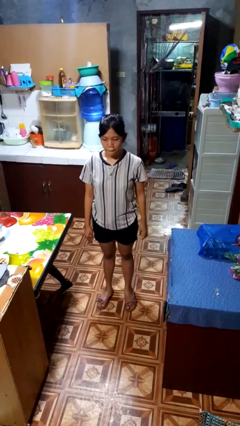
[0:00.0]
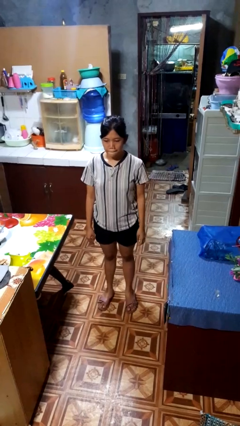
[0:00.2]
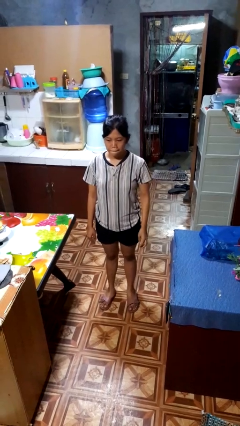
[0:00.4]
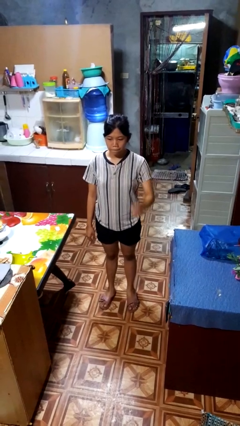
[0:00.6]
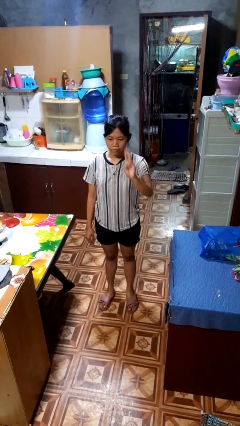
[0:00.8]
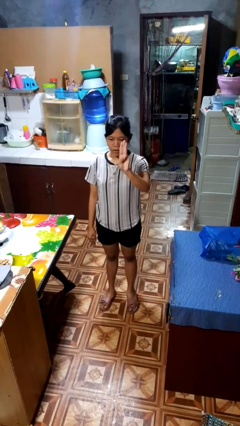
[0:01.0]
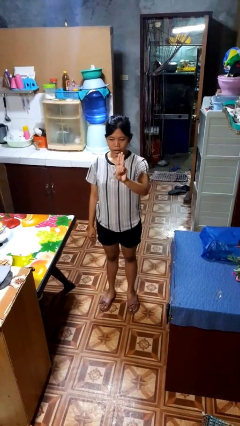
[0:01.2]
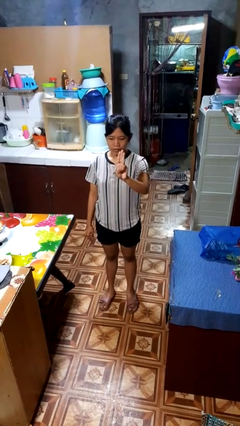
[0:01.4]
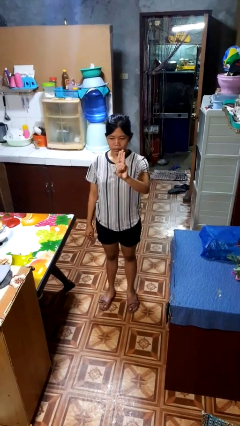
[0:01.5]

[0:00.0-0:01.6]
person gestures number three

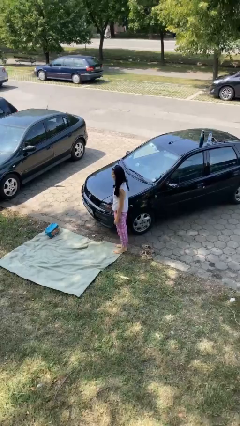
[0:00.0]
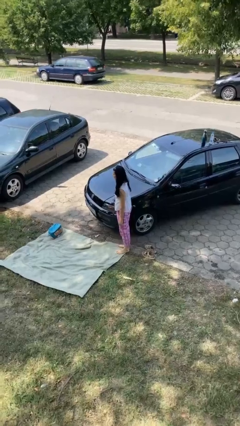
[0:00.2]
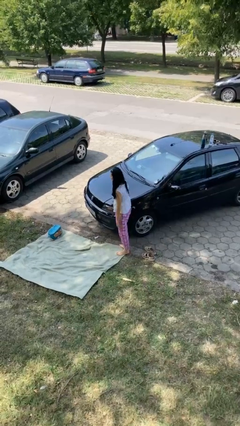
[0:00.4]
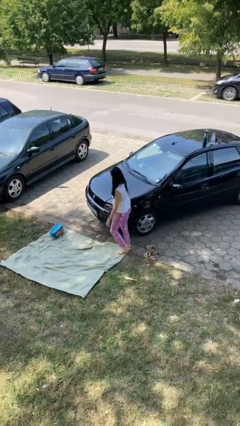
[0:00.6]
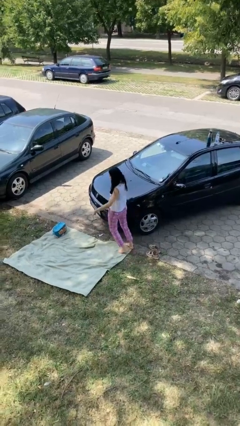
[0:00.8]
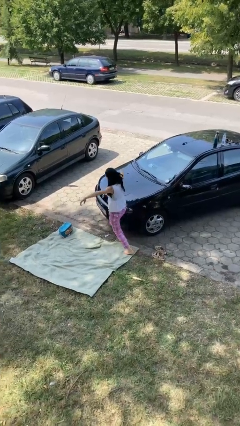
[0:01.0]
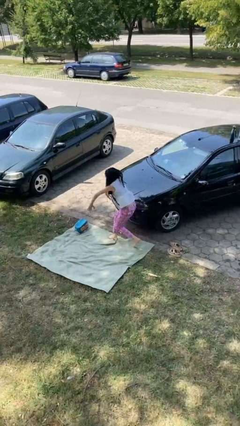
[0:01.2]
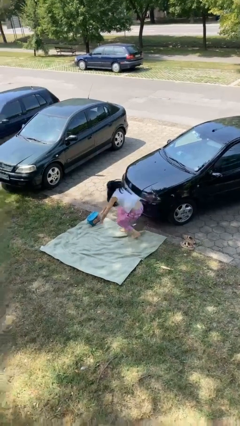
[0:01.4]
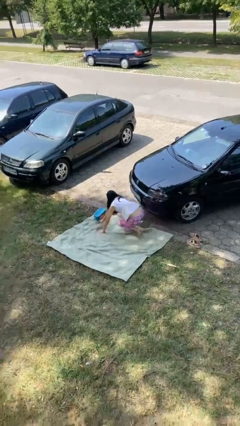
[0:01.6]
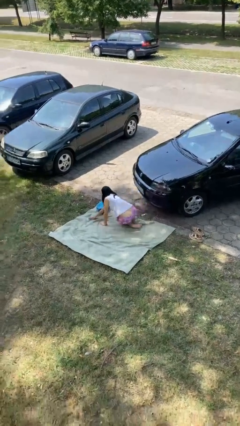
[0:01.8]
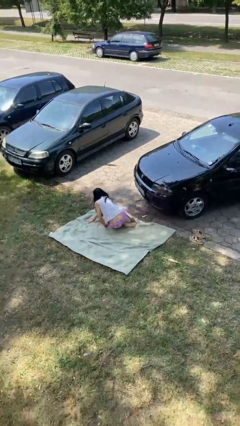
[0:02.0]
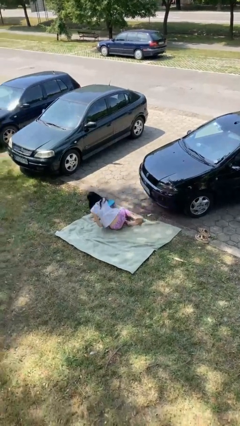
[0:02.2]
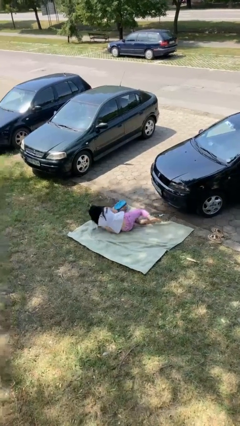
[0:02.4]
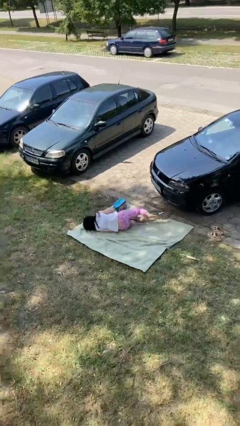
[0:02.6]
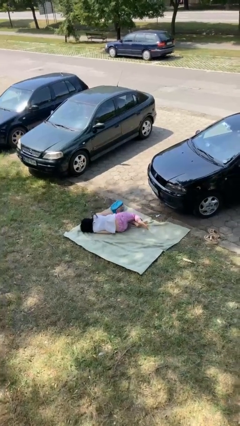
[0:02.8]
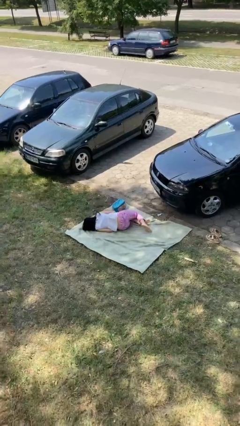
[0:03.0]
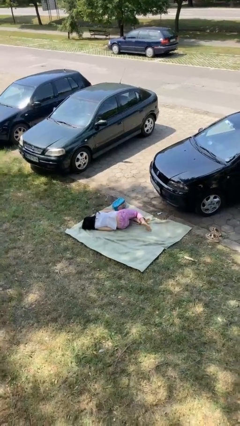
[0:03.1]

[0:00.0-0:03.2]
person trips on object on floor

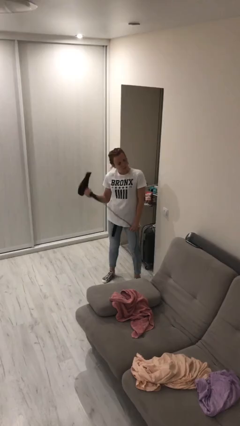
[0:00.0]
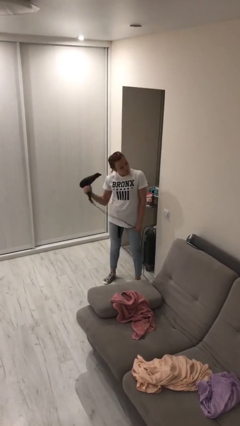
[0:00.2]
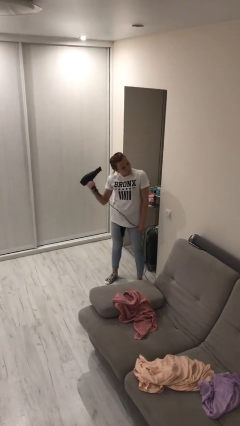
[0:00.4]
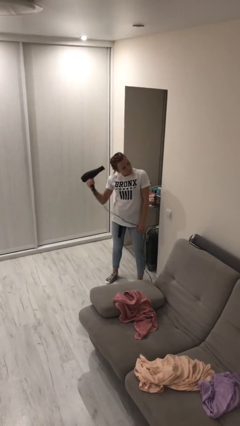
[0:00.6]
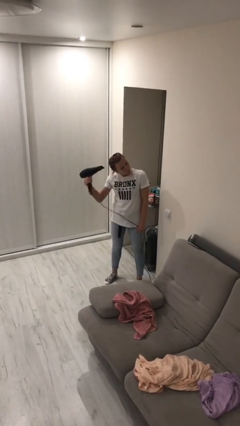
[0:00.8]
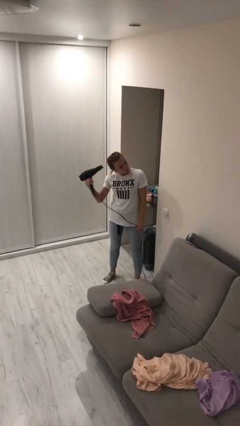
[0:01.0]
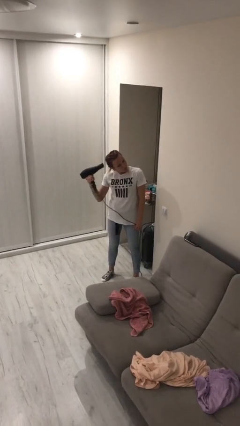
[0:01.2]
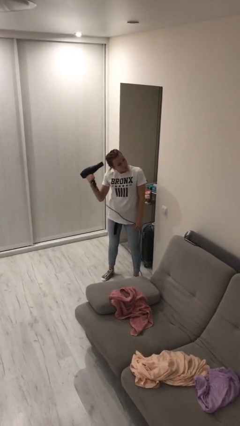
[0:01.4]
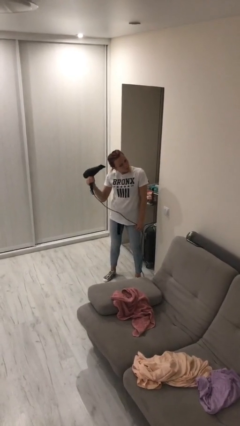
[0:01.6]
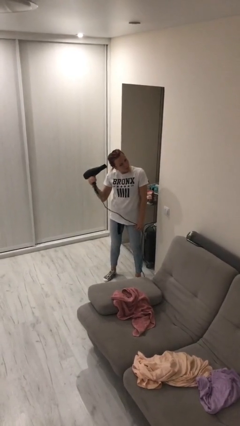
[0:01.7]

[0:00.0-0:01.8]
person dries hair with hairdryer

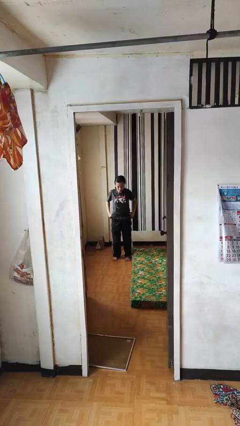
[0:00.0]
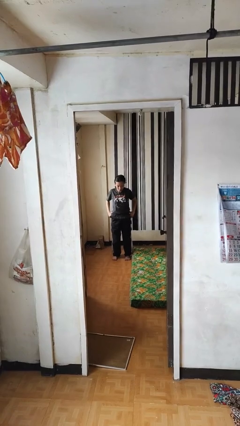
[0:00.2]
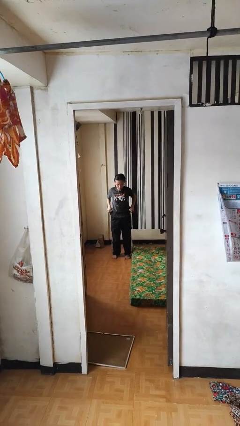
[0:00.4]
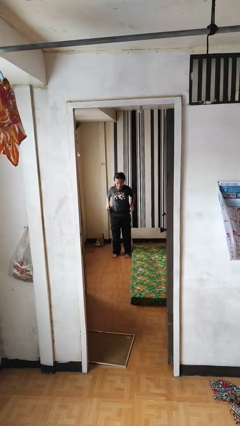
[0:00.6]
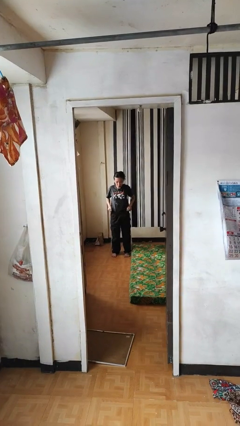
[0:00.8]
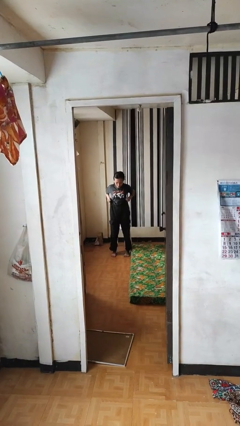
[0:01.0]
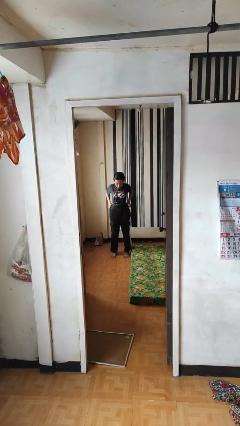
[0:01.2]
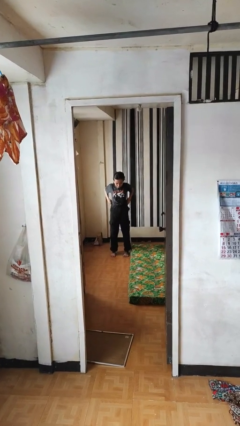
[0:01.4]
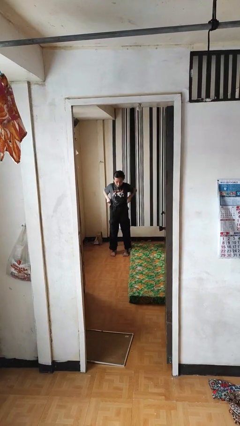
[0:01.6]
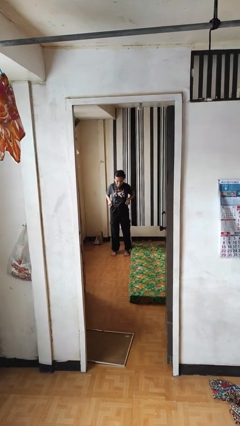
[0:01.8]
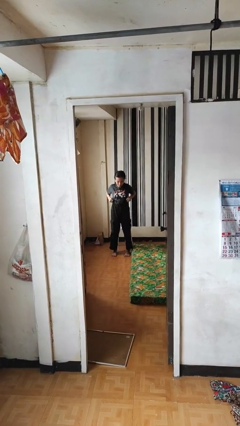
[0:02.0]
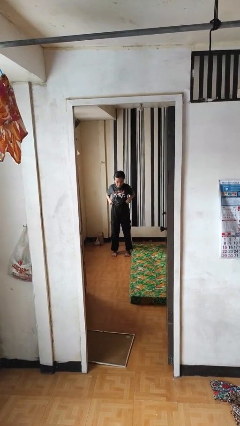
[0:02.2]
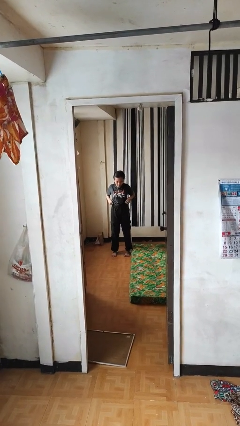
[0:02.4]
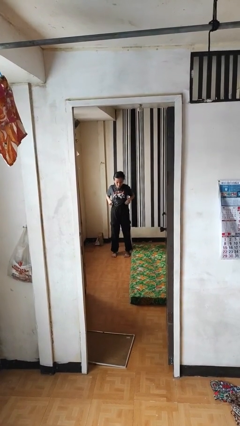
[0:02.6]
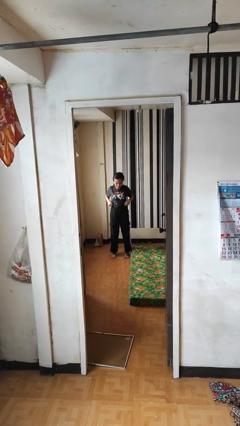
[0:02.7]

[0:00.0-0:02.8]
person hikes up pants

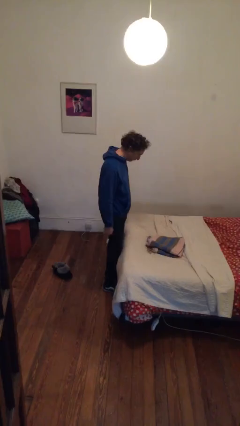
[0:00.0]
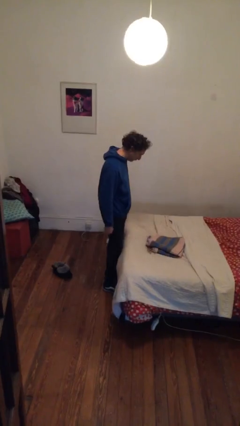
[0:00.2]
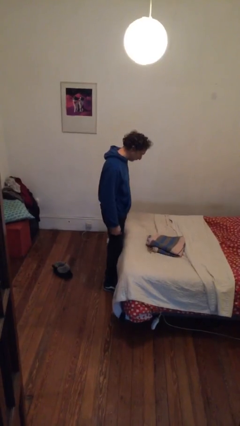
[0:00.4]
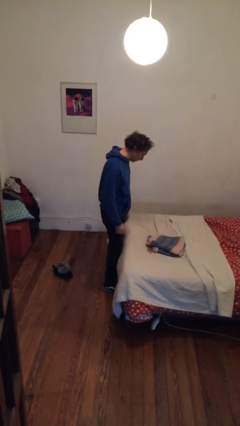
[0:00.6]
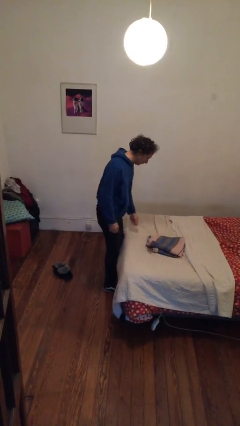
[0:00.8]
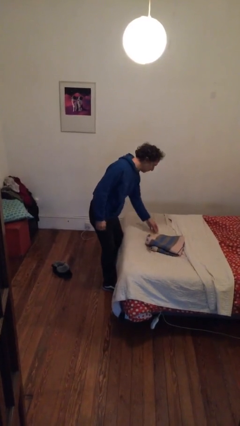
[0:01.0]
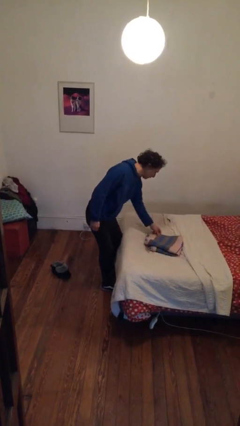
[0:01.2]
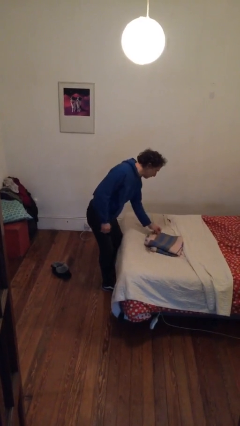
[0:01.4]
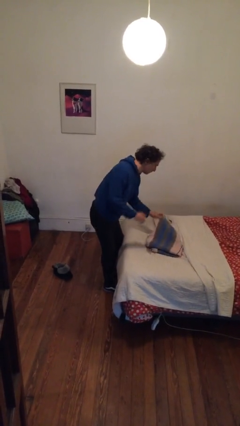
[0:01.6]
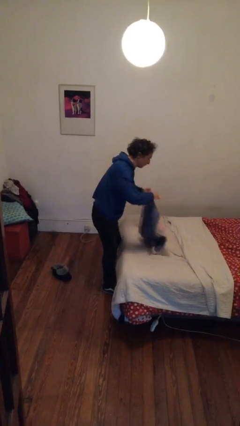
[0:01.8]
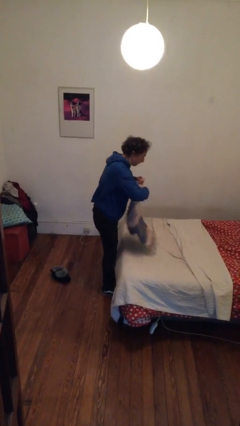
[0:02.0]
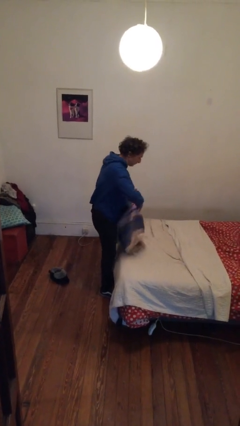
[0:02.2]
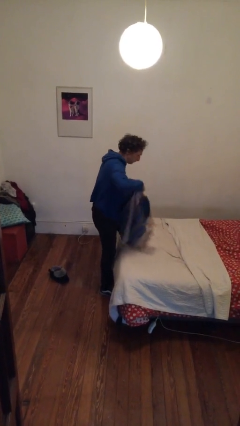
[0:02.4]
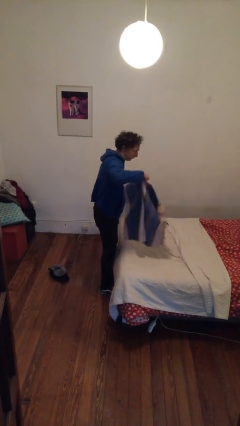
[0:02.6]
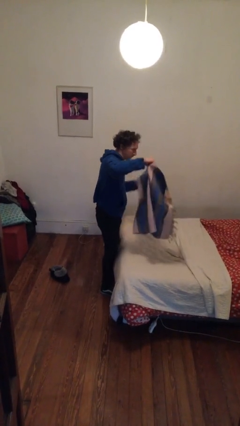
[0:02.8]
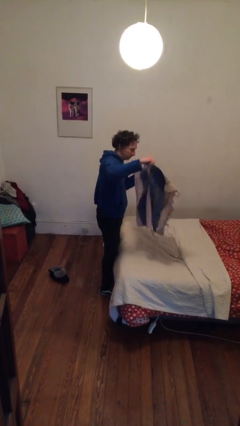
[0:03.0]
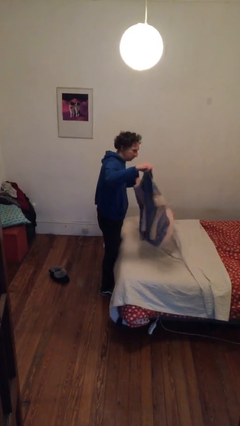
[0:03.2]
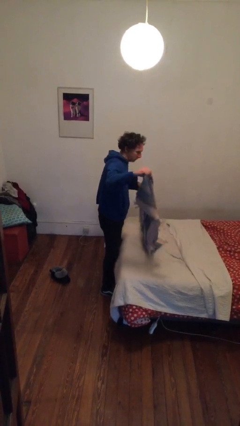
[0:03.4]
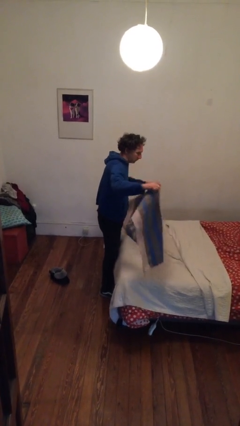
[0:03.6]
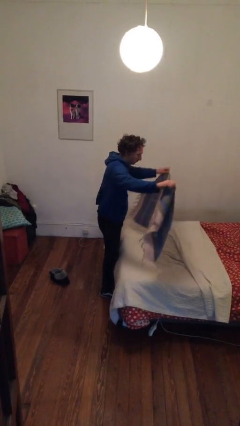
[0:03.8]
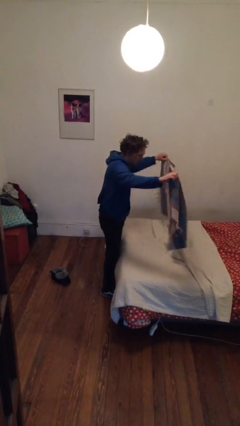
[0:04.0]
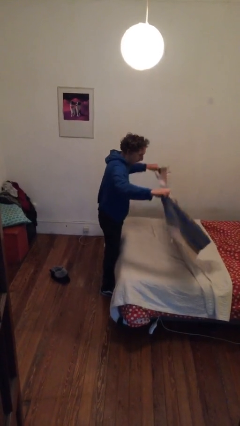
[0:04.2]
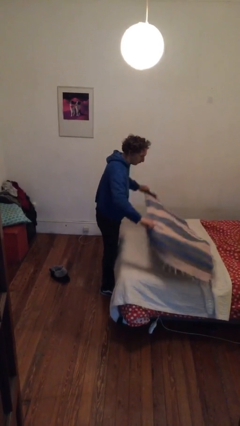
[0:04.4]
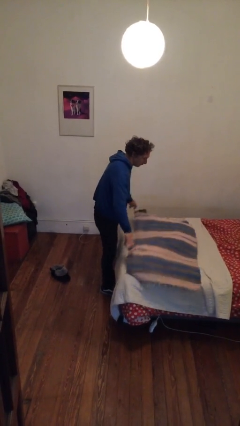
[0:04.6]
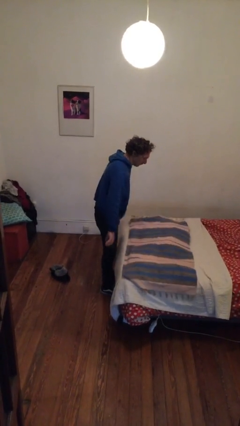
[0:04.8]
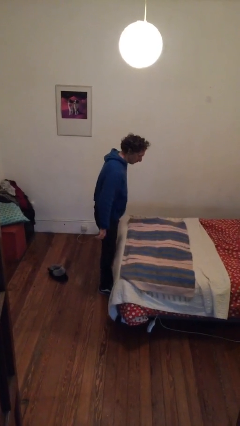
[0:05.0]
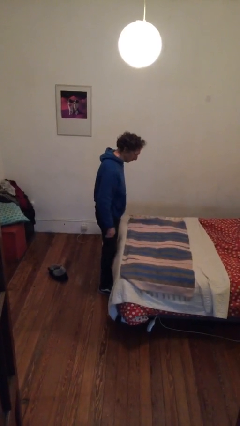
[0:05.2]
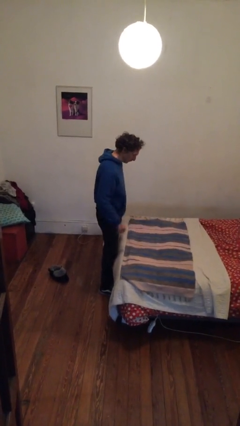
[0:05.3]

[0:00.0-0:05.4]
person unfolds blanket

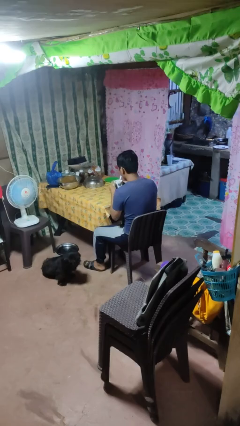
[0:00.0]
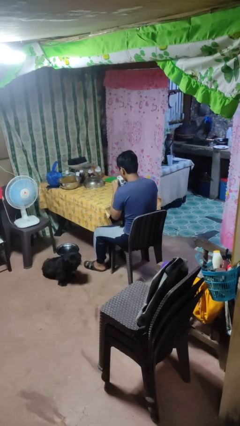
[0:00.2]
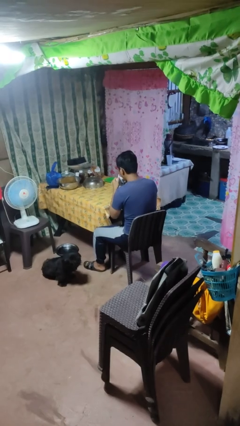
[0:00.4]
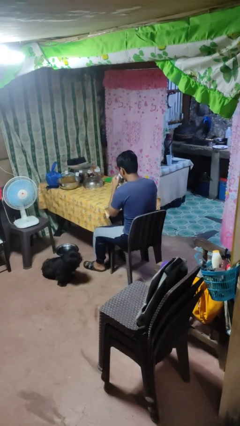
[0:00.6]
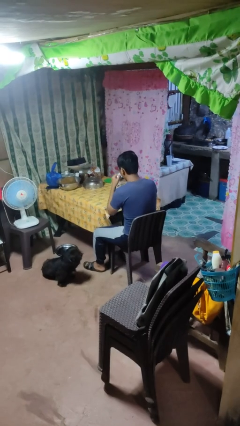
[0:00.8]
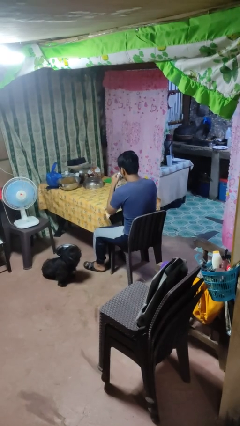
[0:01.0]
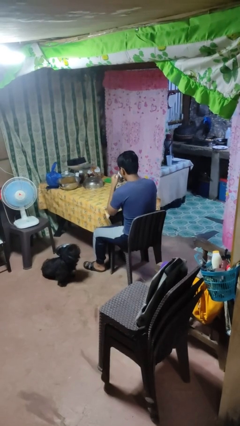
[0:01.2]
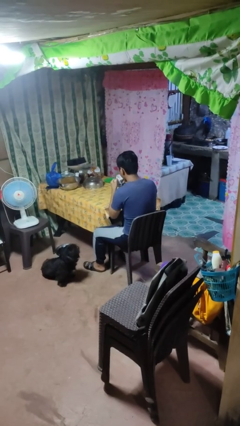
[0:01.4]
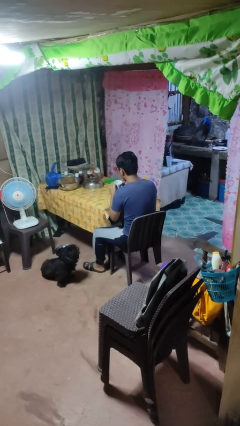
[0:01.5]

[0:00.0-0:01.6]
person drinks from mug

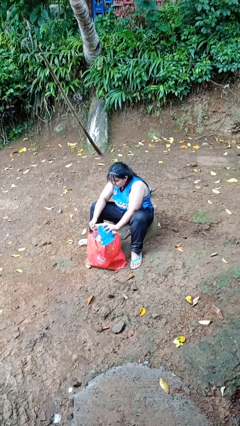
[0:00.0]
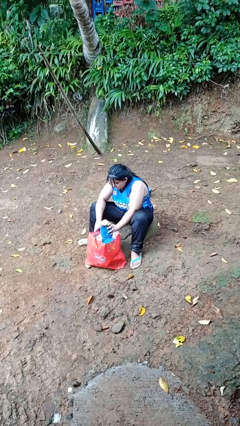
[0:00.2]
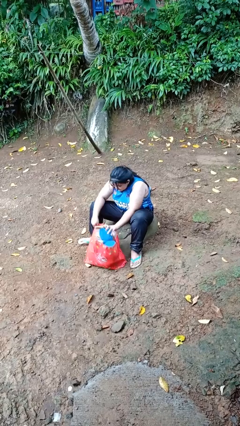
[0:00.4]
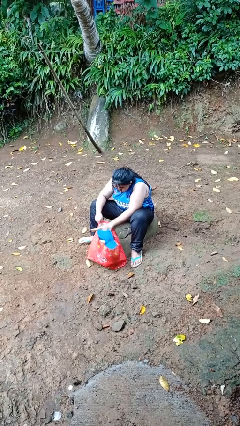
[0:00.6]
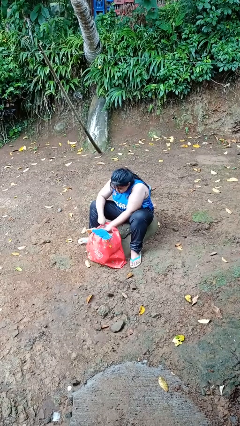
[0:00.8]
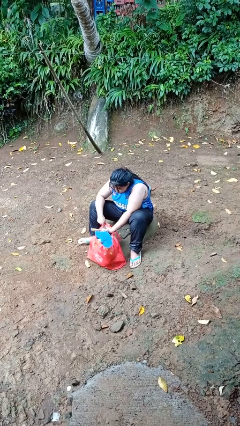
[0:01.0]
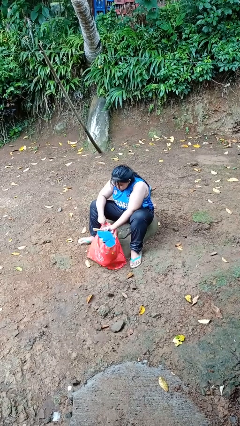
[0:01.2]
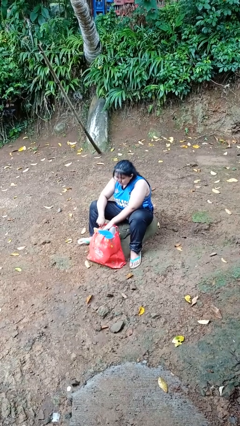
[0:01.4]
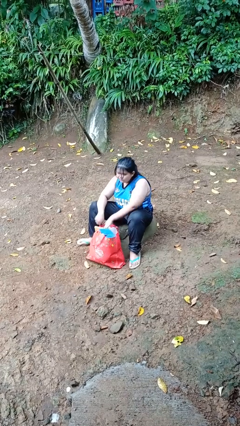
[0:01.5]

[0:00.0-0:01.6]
person searches in bag
